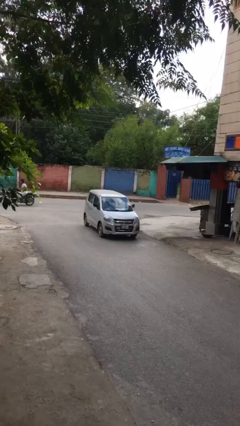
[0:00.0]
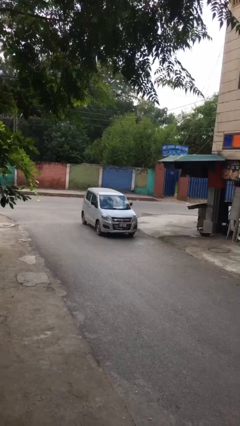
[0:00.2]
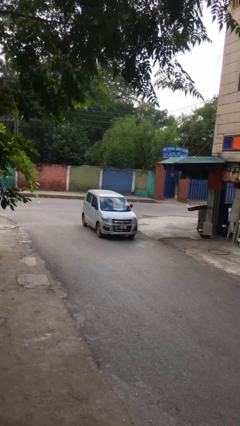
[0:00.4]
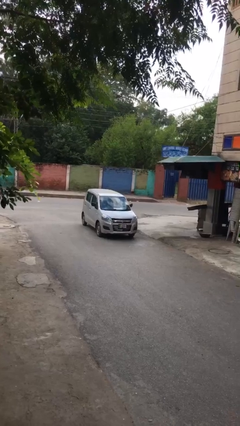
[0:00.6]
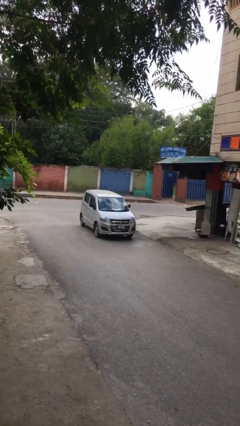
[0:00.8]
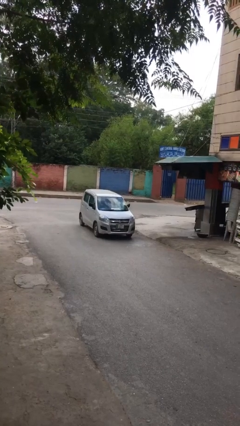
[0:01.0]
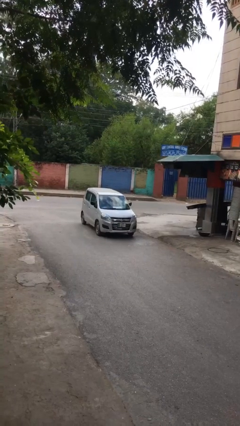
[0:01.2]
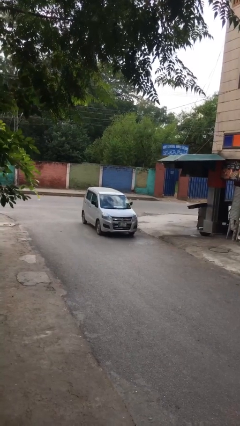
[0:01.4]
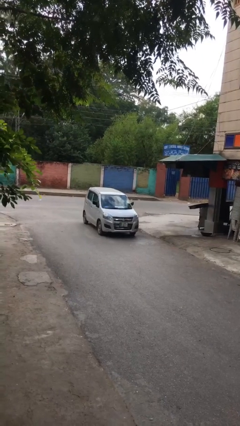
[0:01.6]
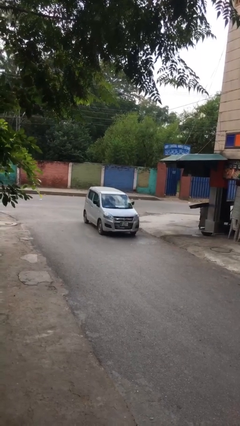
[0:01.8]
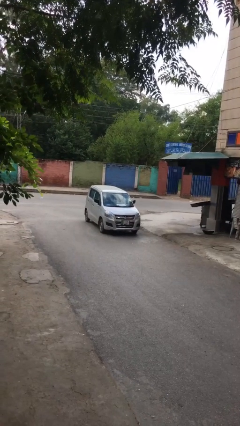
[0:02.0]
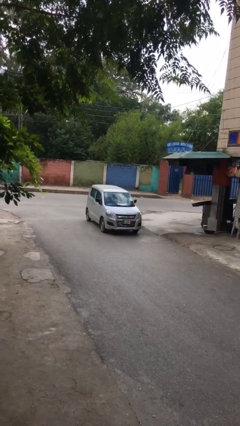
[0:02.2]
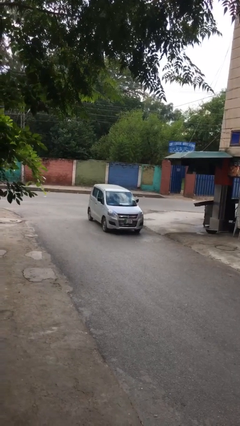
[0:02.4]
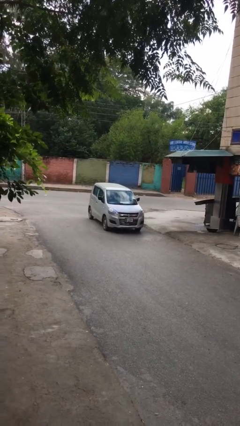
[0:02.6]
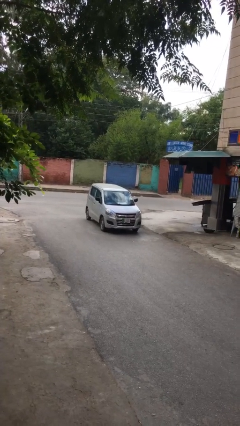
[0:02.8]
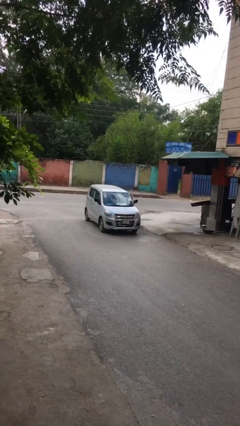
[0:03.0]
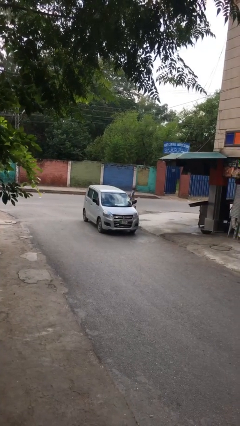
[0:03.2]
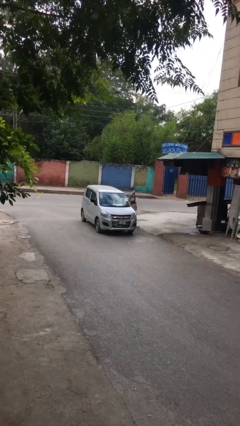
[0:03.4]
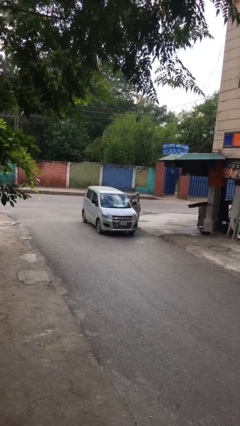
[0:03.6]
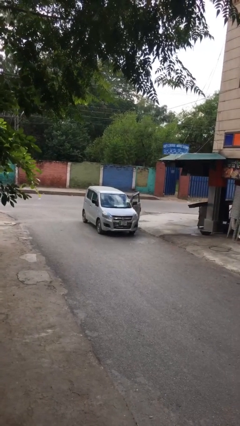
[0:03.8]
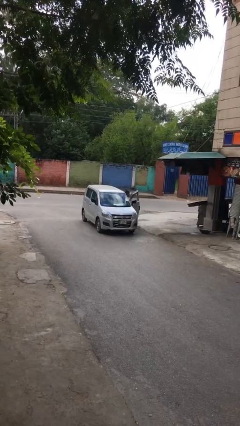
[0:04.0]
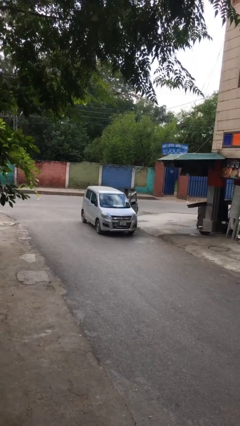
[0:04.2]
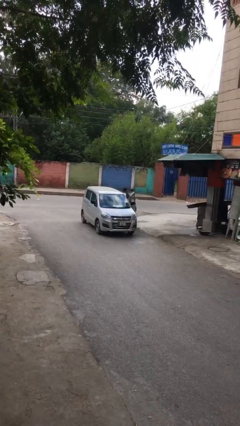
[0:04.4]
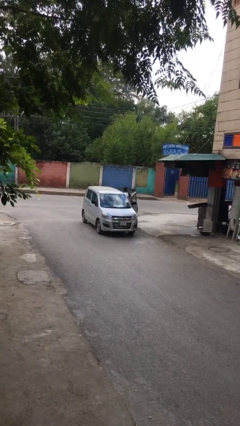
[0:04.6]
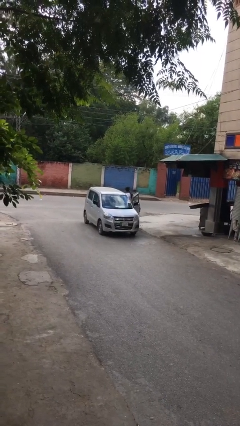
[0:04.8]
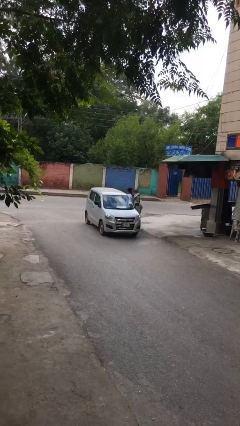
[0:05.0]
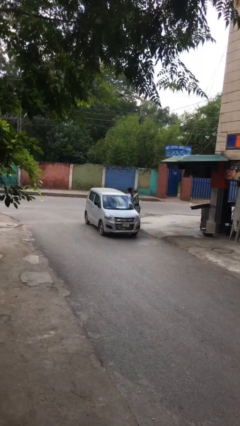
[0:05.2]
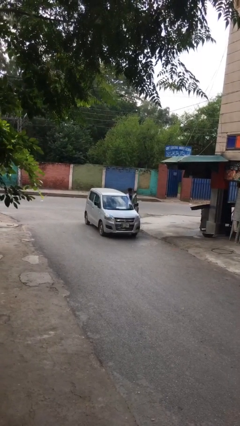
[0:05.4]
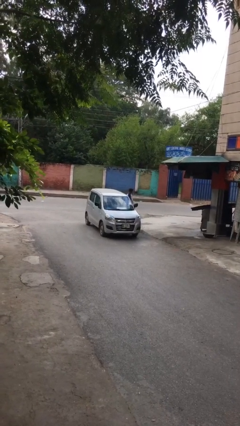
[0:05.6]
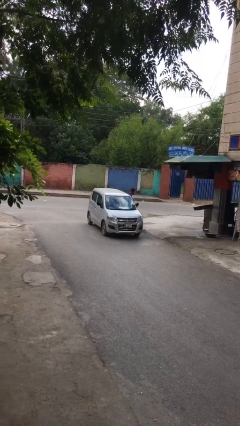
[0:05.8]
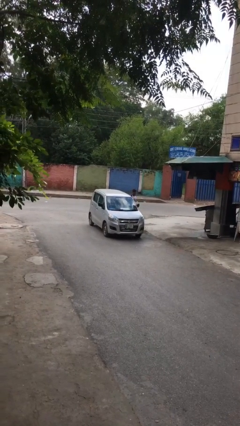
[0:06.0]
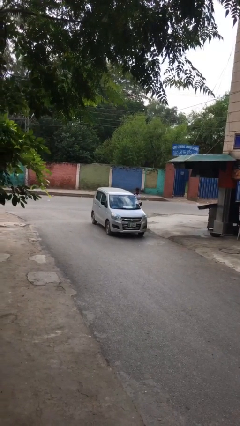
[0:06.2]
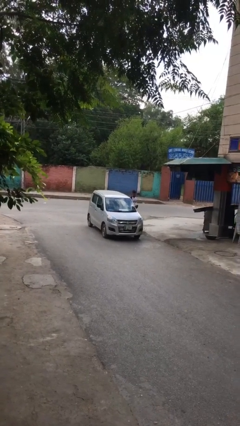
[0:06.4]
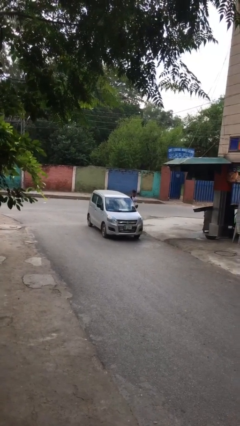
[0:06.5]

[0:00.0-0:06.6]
car drops off person

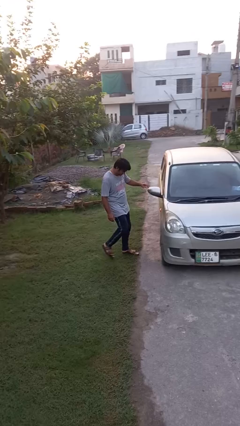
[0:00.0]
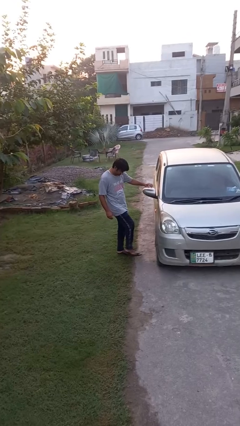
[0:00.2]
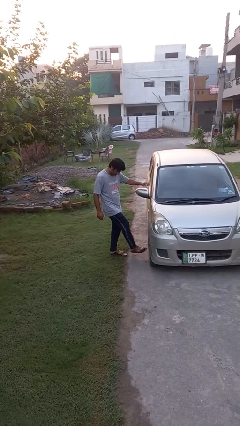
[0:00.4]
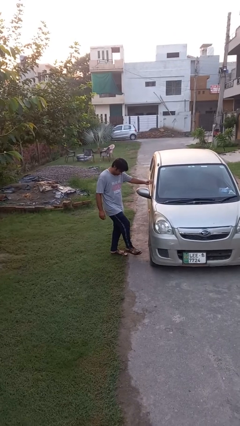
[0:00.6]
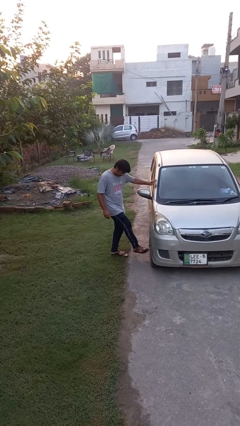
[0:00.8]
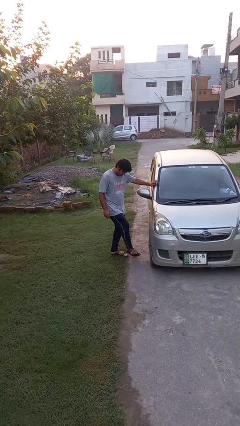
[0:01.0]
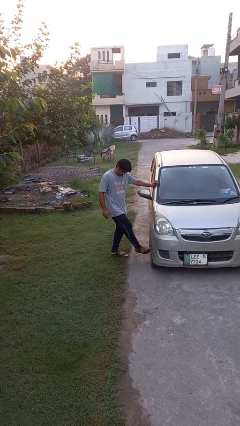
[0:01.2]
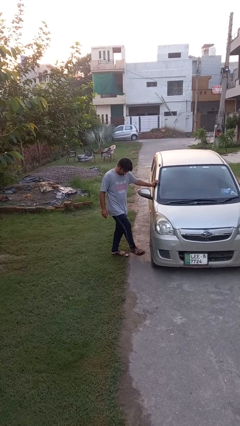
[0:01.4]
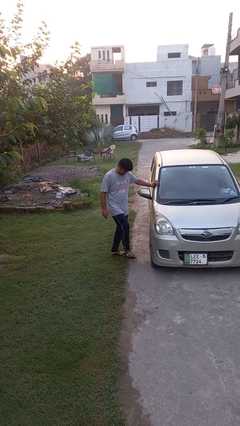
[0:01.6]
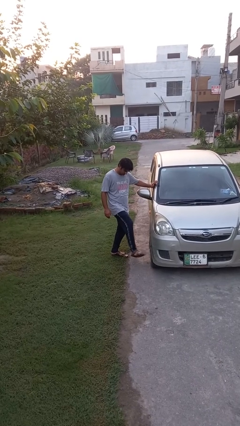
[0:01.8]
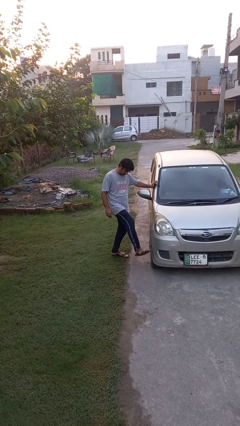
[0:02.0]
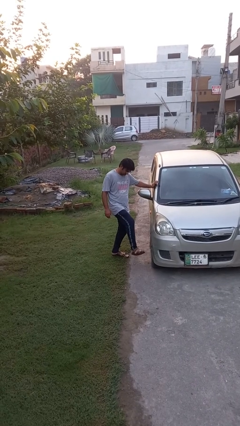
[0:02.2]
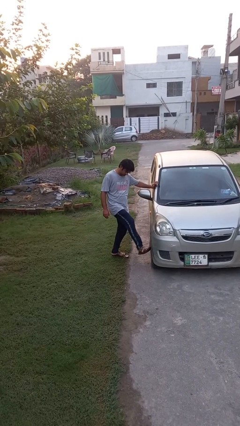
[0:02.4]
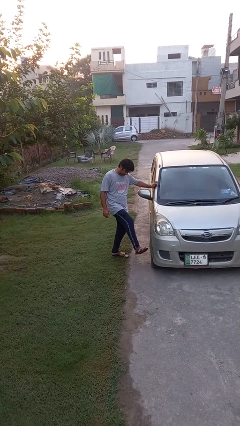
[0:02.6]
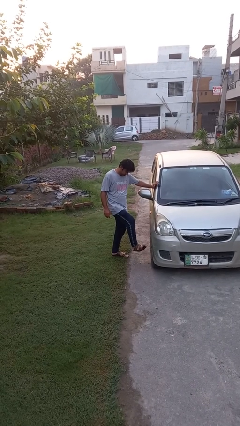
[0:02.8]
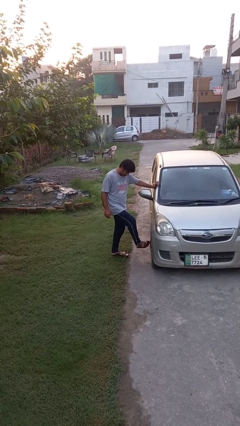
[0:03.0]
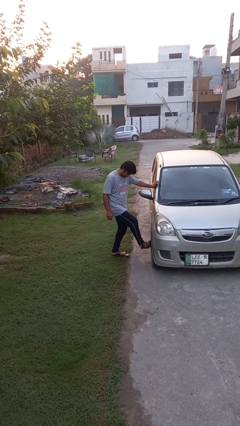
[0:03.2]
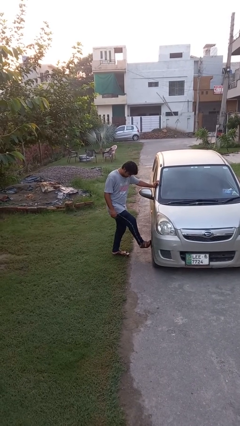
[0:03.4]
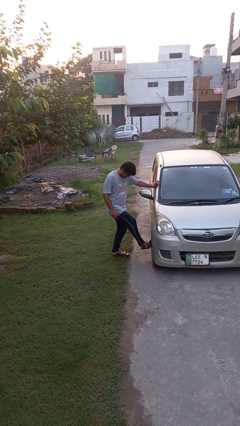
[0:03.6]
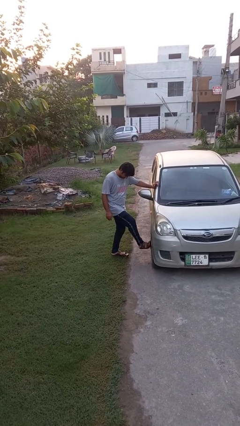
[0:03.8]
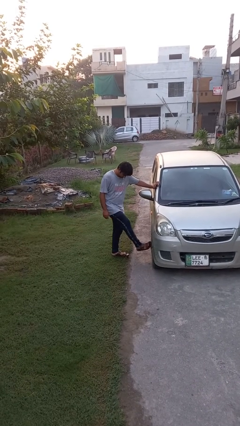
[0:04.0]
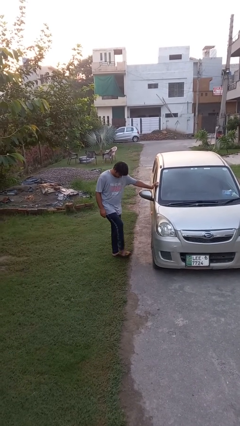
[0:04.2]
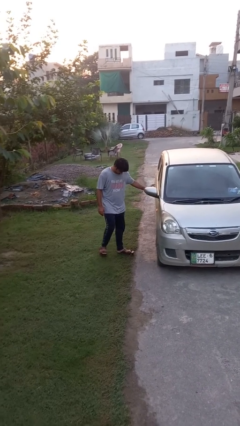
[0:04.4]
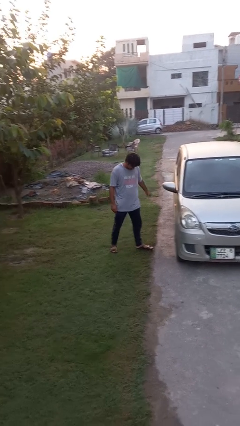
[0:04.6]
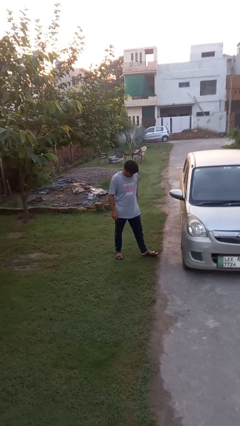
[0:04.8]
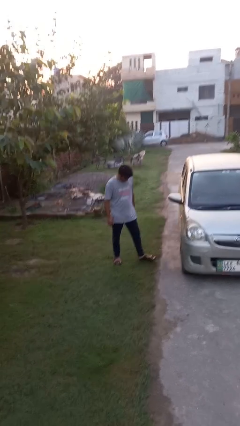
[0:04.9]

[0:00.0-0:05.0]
person kicks car tires

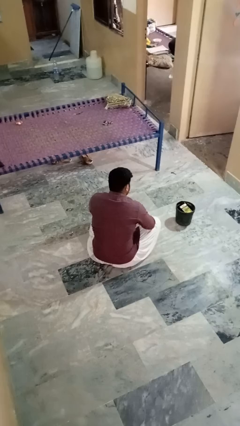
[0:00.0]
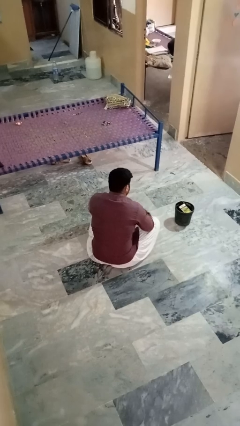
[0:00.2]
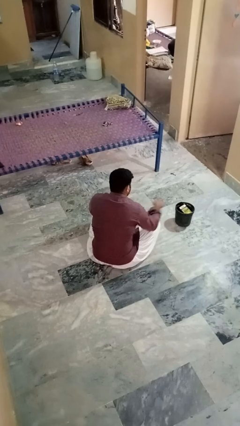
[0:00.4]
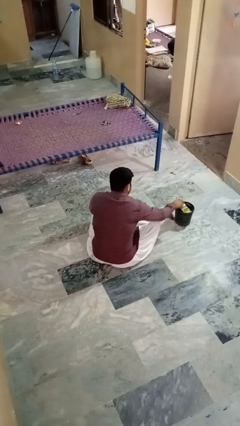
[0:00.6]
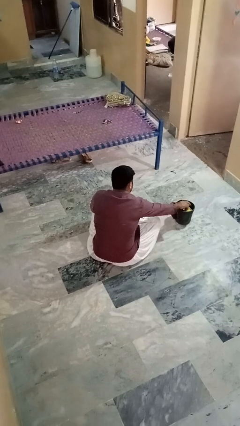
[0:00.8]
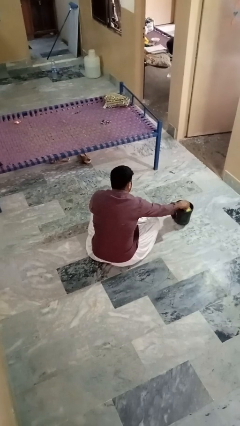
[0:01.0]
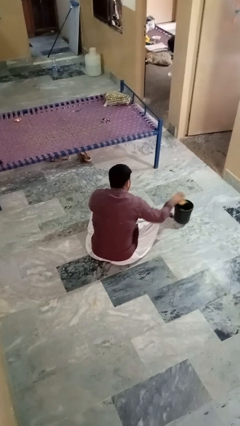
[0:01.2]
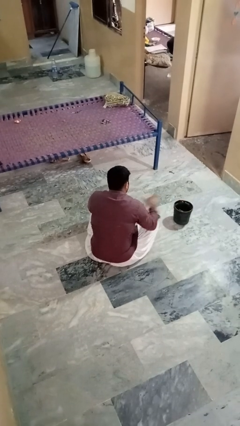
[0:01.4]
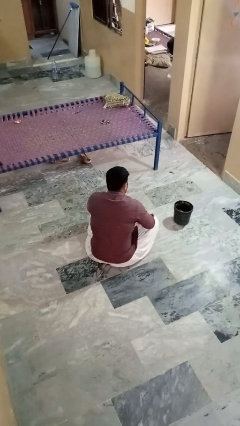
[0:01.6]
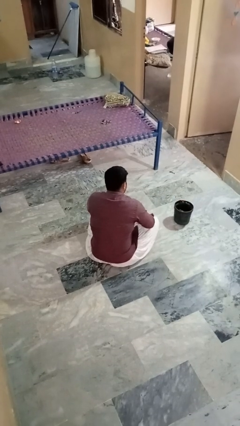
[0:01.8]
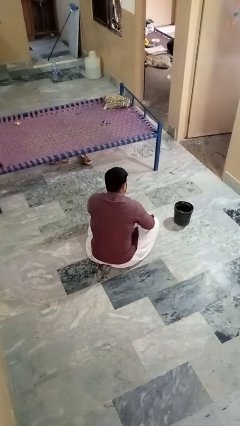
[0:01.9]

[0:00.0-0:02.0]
person takes object from basket

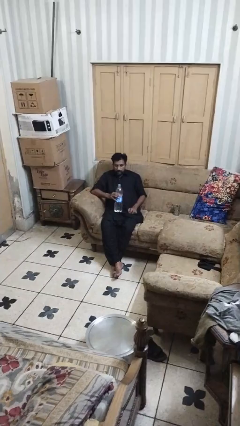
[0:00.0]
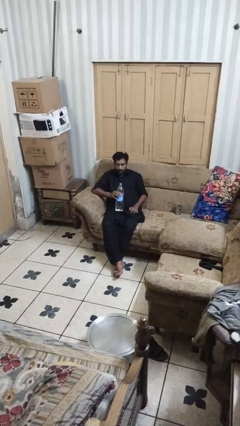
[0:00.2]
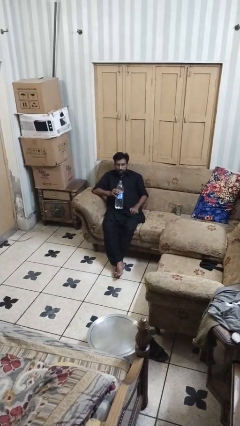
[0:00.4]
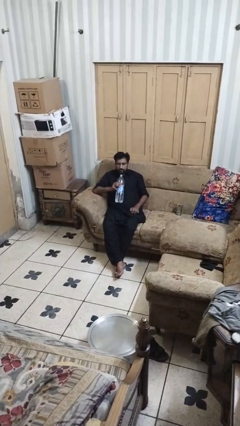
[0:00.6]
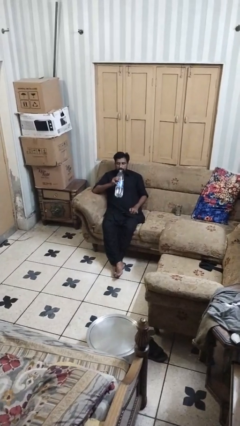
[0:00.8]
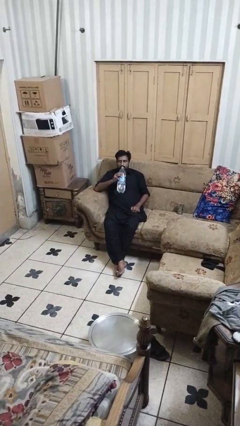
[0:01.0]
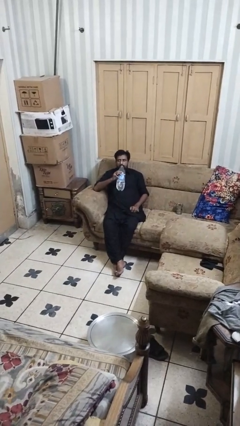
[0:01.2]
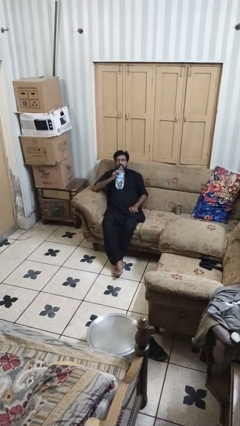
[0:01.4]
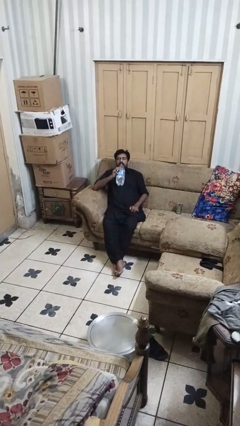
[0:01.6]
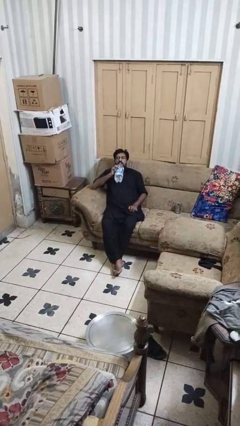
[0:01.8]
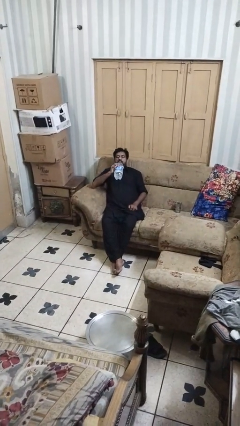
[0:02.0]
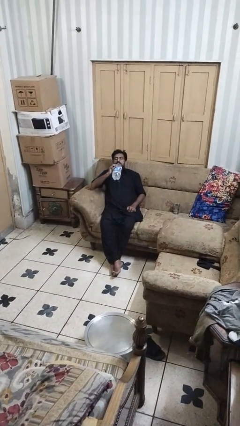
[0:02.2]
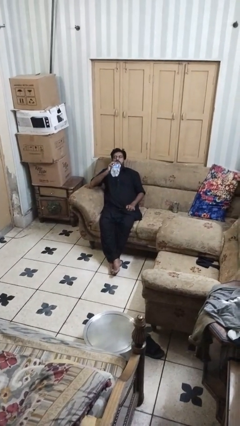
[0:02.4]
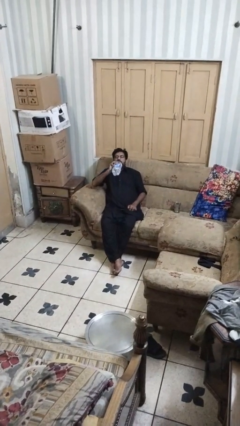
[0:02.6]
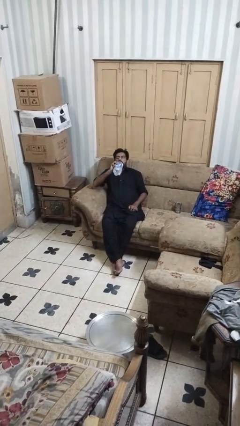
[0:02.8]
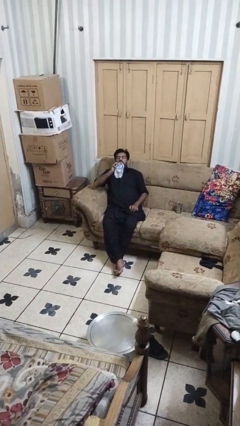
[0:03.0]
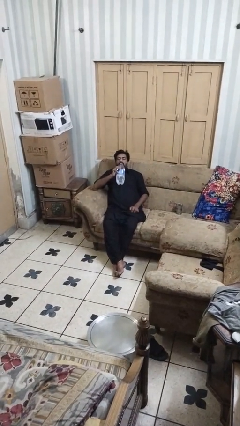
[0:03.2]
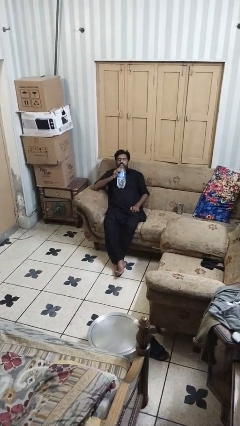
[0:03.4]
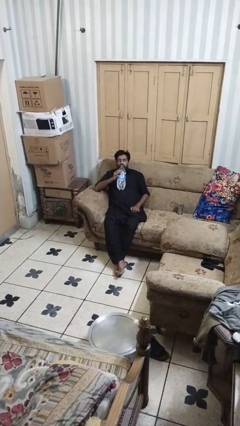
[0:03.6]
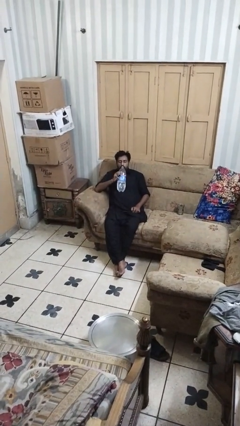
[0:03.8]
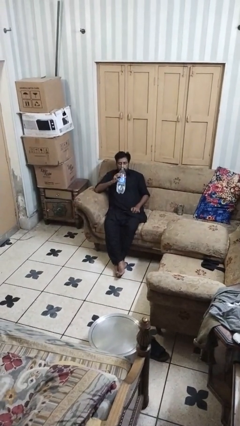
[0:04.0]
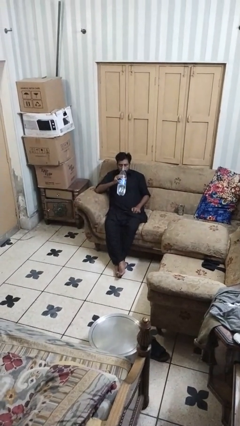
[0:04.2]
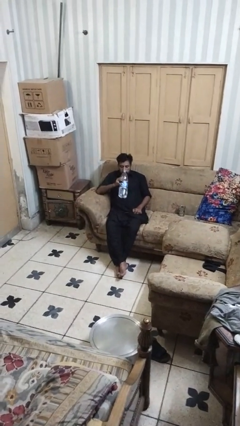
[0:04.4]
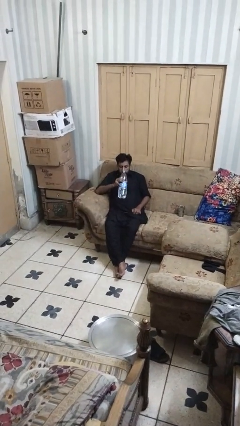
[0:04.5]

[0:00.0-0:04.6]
person drinks from bottle
